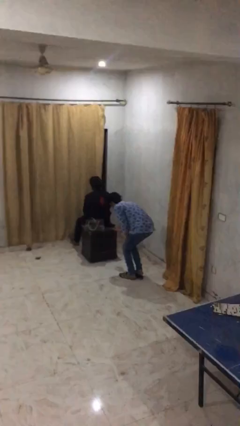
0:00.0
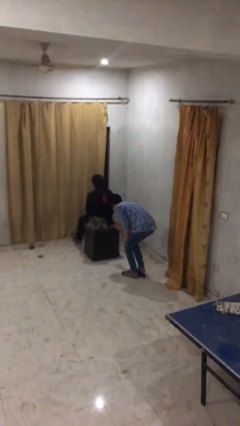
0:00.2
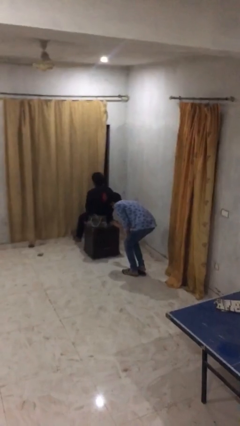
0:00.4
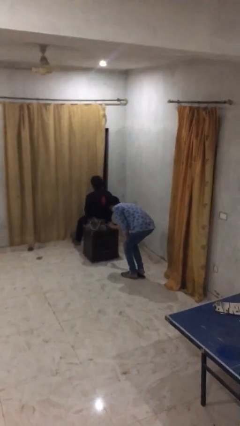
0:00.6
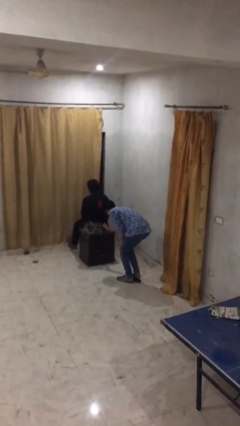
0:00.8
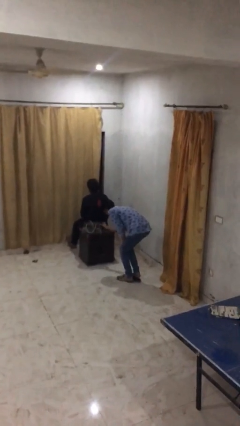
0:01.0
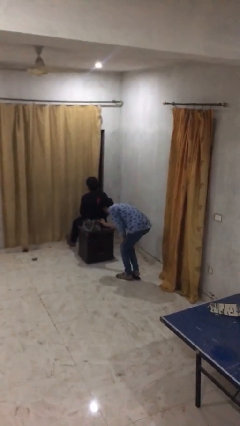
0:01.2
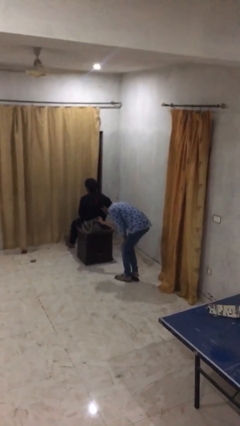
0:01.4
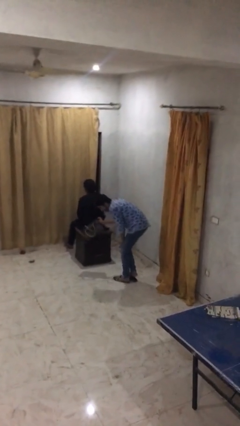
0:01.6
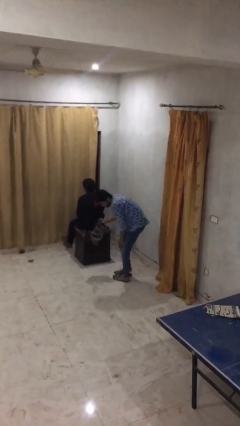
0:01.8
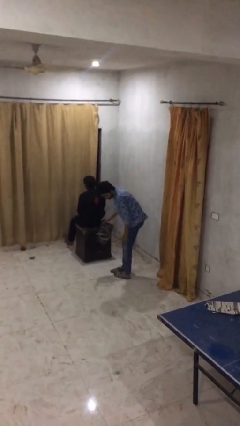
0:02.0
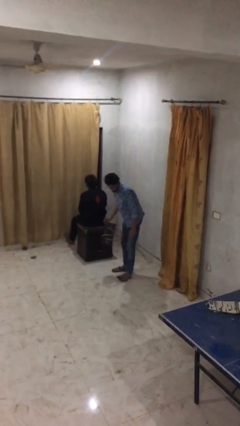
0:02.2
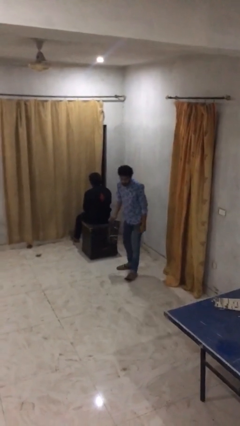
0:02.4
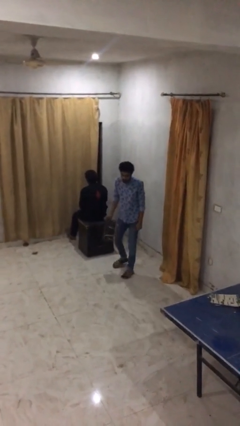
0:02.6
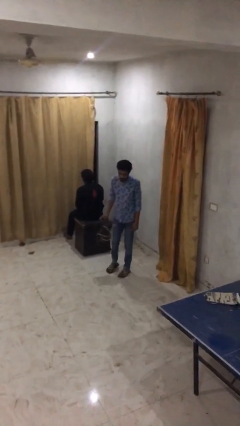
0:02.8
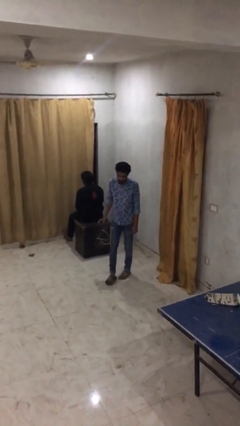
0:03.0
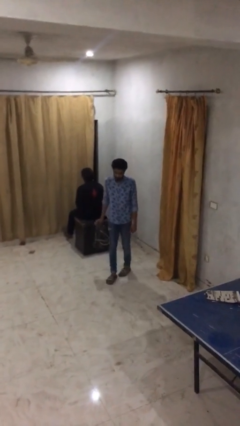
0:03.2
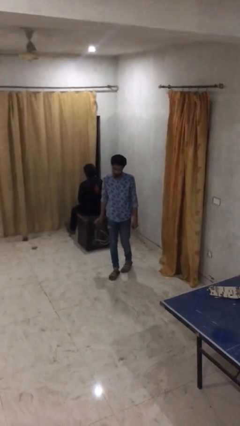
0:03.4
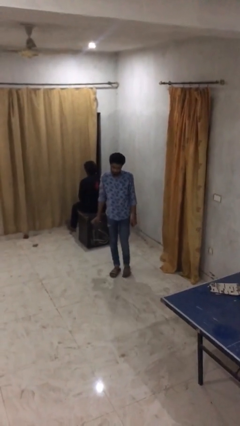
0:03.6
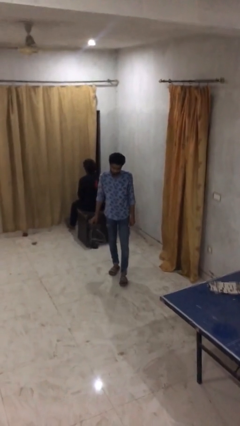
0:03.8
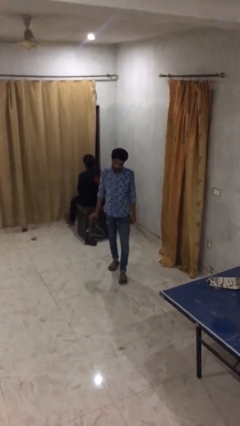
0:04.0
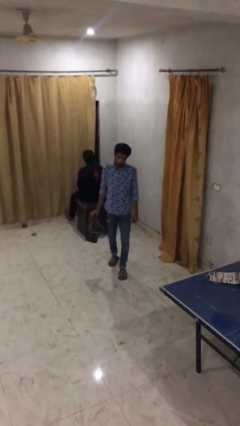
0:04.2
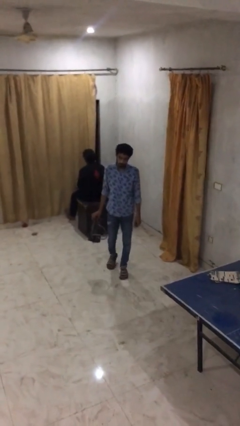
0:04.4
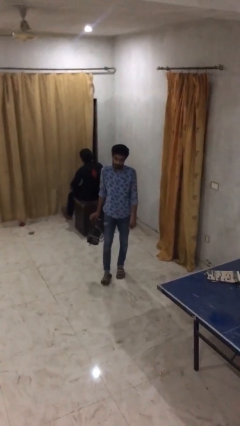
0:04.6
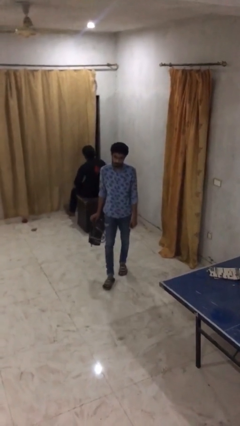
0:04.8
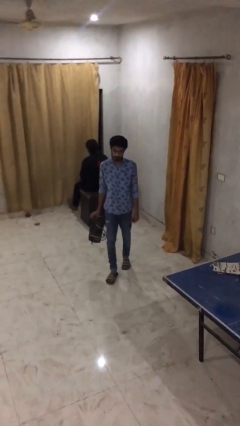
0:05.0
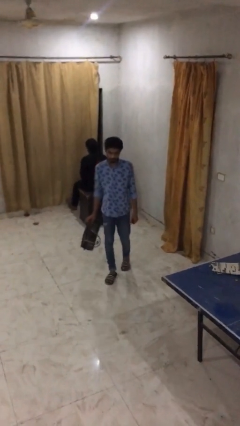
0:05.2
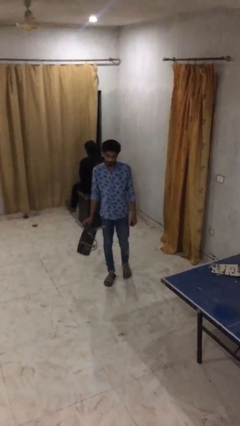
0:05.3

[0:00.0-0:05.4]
person steals object from person

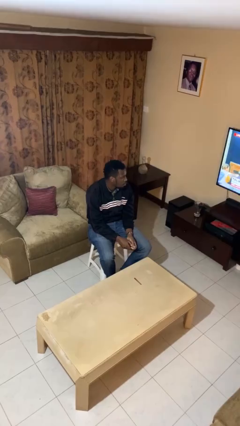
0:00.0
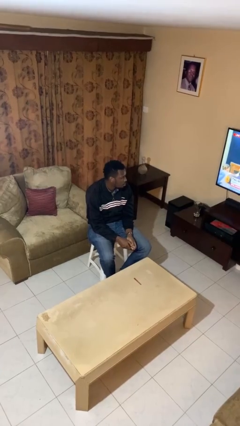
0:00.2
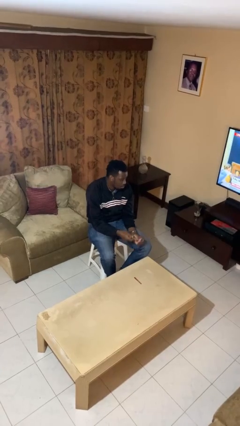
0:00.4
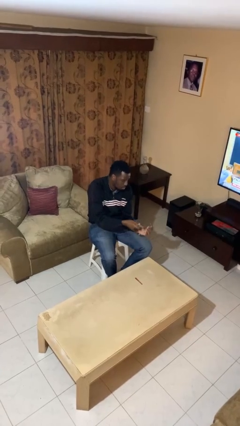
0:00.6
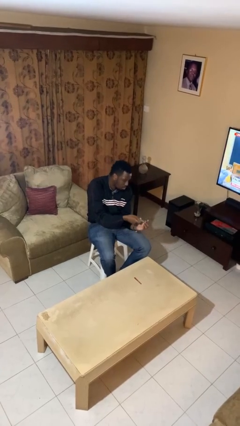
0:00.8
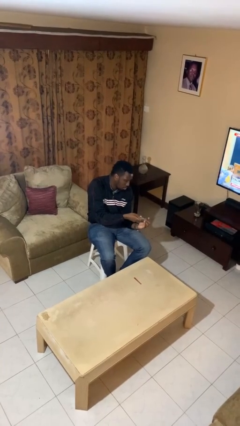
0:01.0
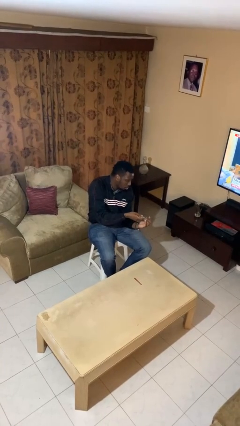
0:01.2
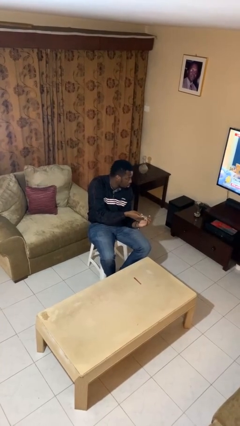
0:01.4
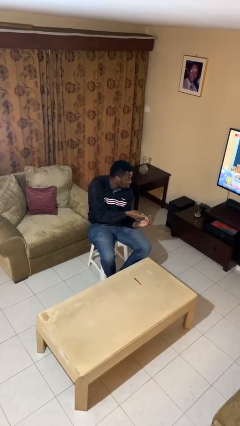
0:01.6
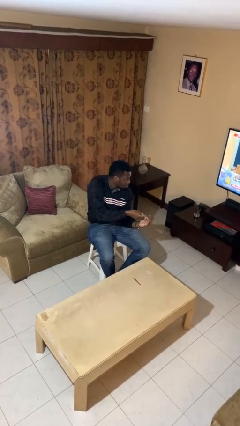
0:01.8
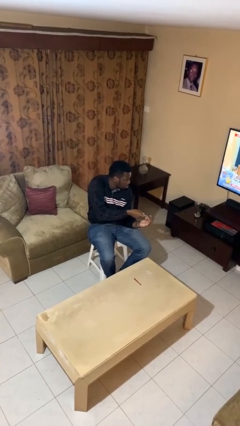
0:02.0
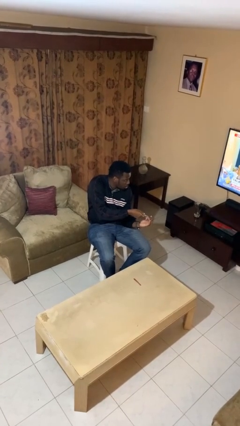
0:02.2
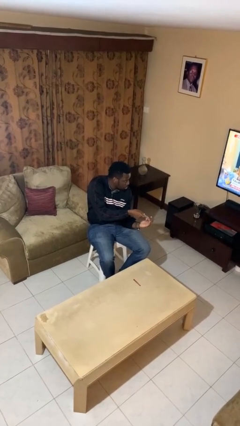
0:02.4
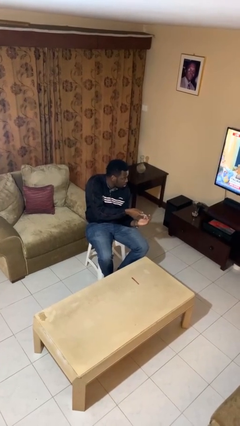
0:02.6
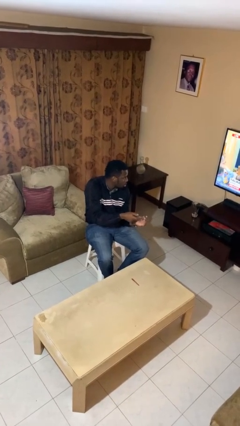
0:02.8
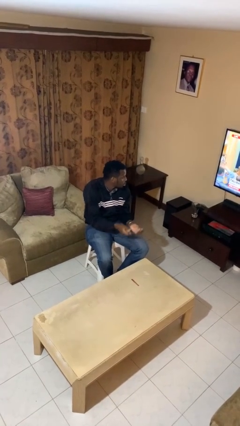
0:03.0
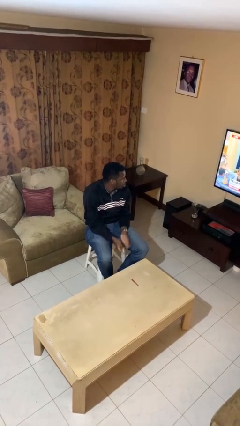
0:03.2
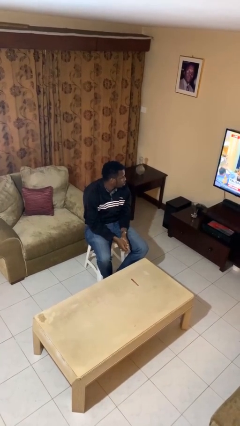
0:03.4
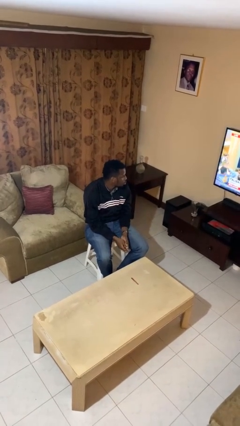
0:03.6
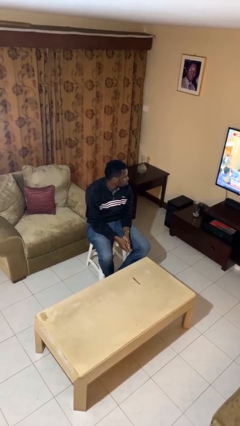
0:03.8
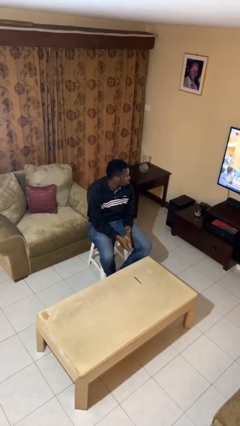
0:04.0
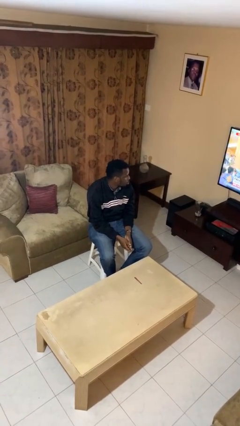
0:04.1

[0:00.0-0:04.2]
person clips fingernails

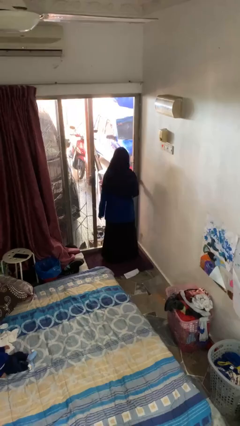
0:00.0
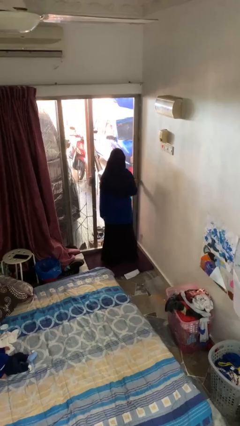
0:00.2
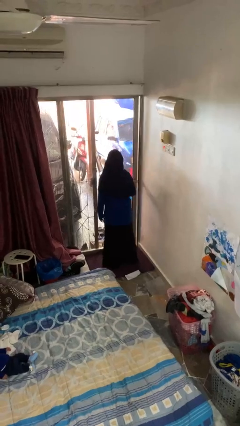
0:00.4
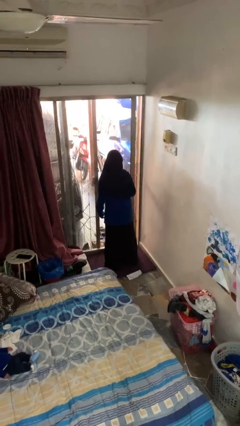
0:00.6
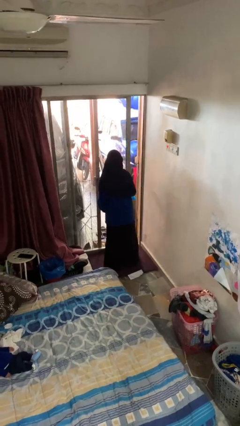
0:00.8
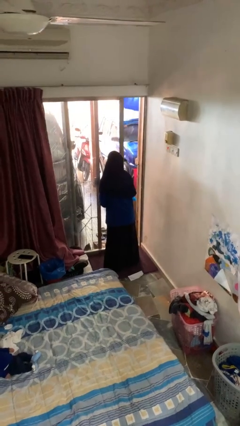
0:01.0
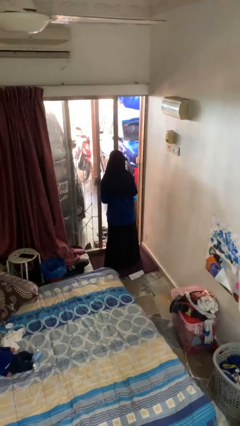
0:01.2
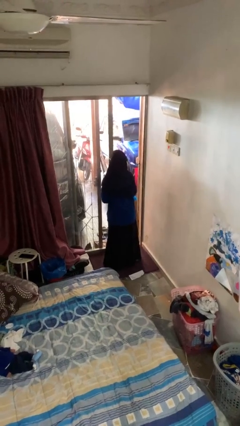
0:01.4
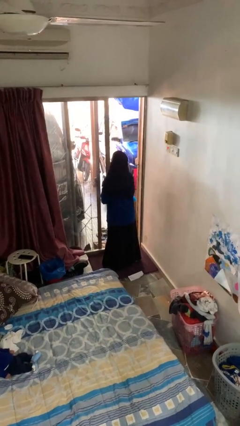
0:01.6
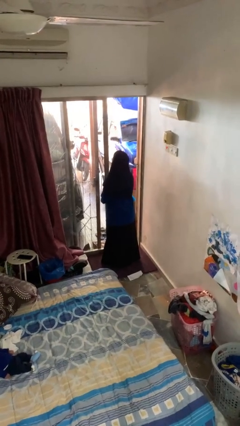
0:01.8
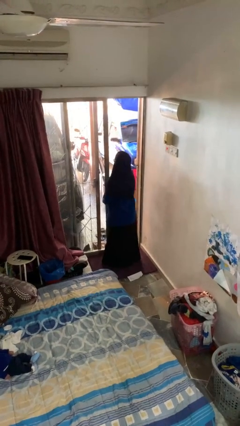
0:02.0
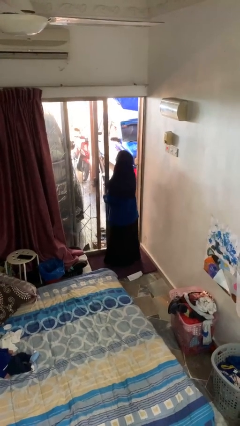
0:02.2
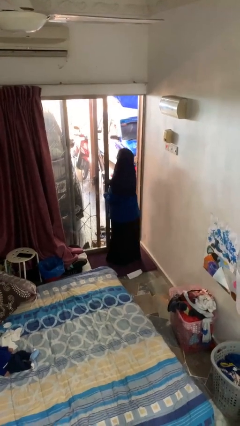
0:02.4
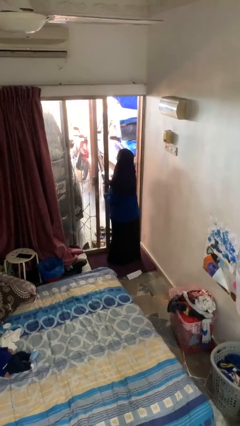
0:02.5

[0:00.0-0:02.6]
person opens sliding door

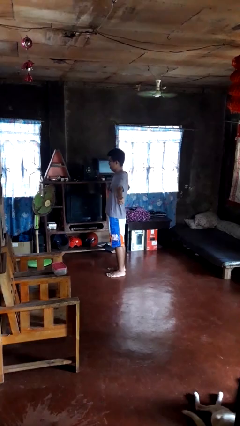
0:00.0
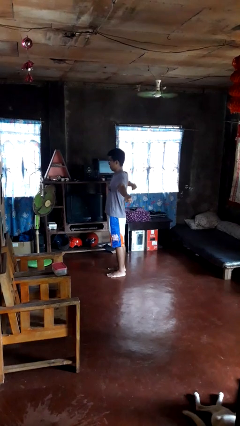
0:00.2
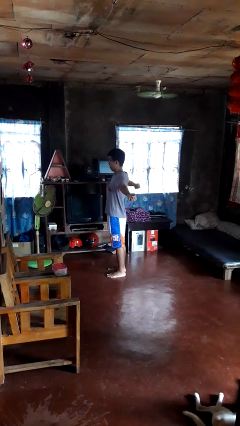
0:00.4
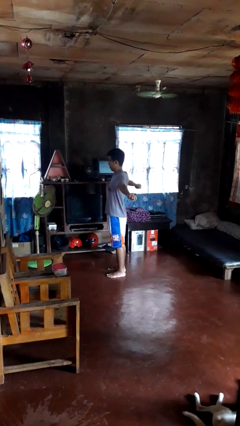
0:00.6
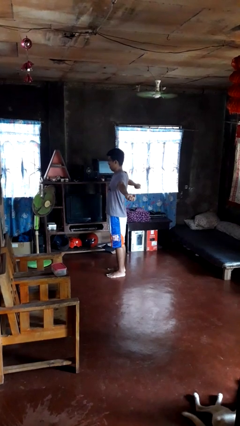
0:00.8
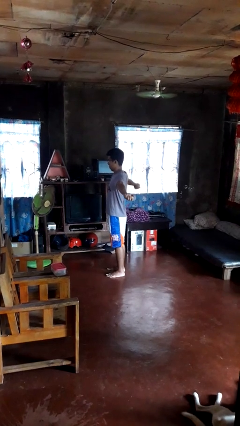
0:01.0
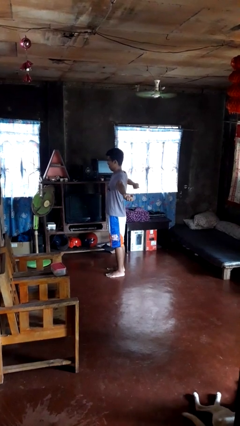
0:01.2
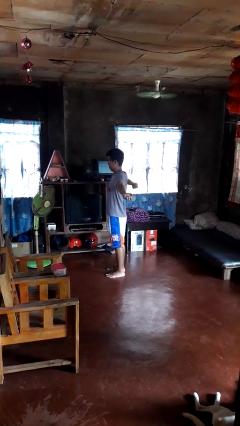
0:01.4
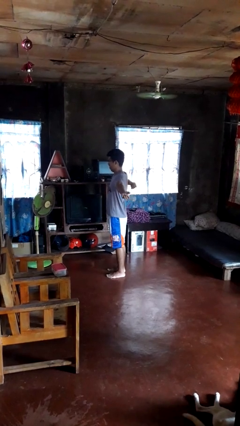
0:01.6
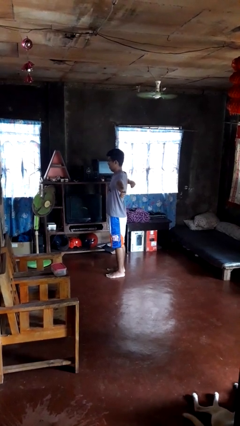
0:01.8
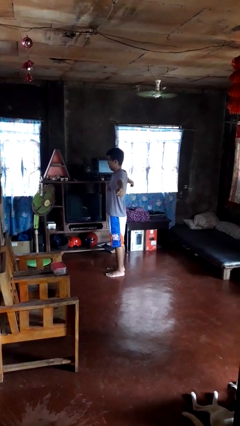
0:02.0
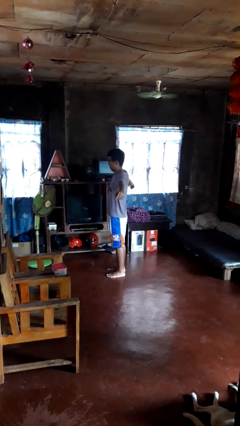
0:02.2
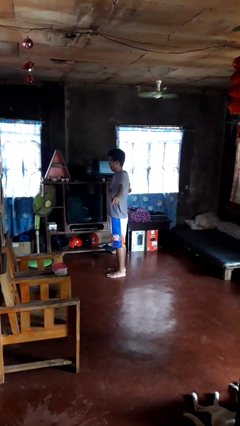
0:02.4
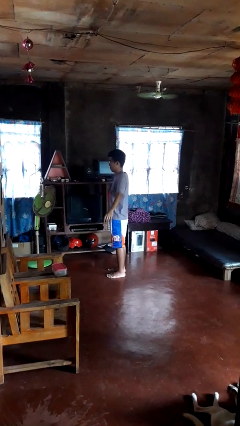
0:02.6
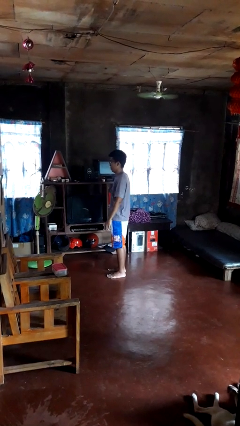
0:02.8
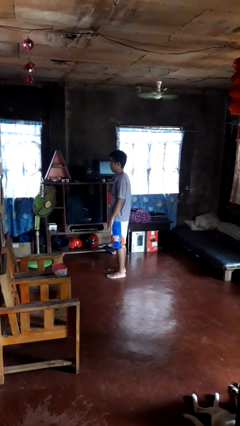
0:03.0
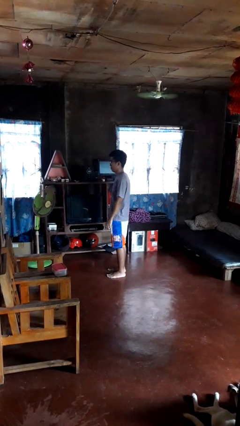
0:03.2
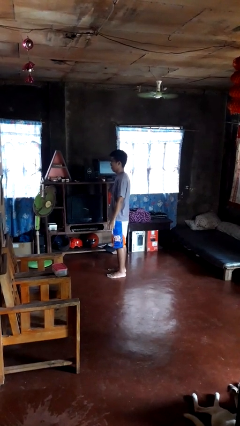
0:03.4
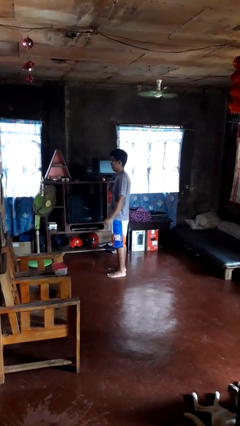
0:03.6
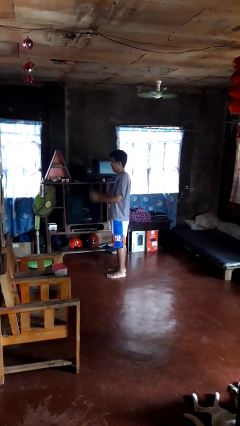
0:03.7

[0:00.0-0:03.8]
person stretches arms to side
